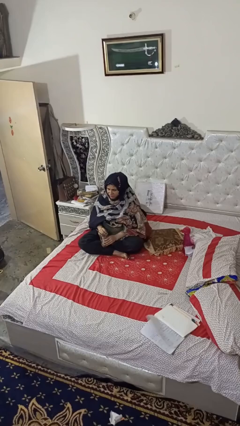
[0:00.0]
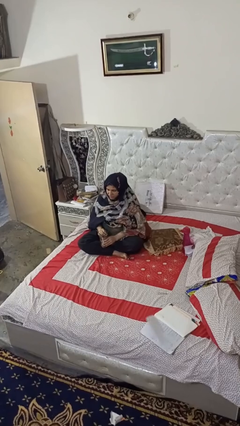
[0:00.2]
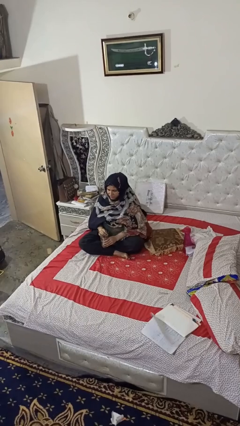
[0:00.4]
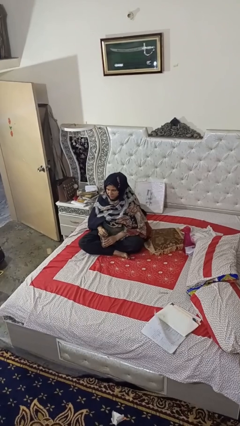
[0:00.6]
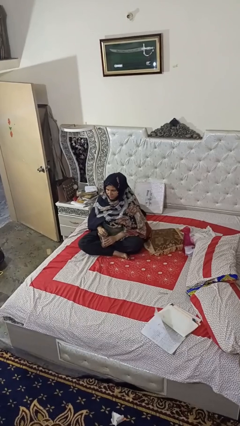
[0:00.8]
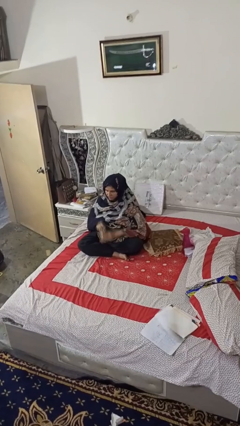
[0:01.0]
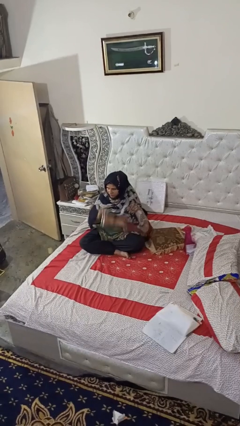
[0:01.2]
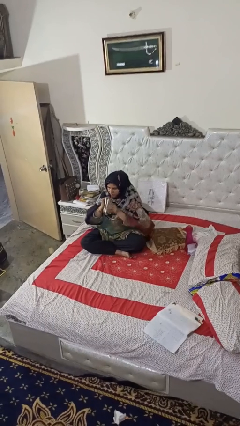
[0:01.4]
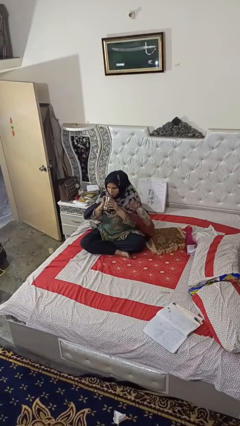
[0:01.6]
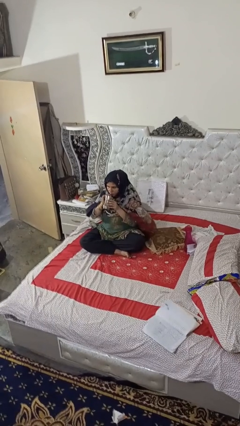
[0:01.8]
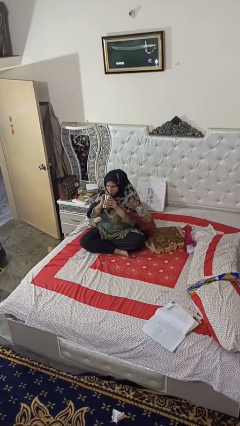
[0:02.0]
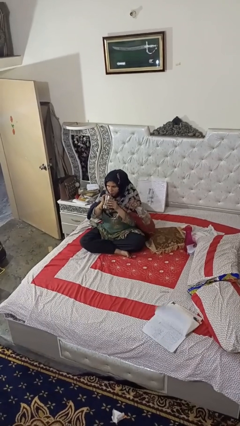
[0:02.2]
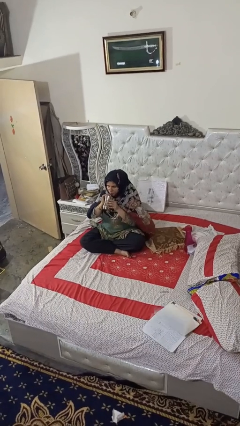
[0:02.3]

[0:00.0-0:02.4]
person drinks from straw

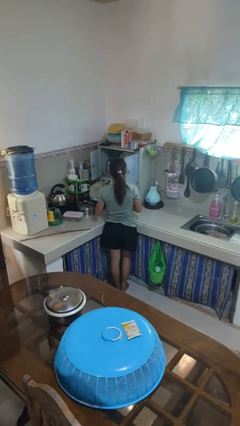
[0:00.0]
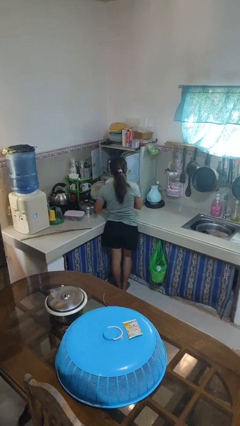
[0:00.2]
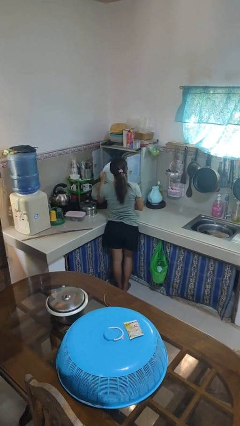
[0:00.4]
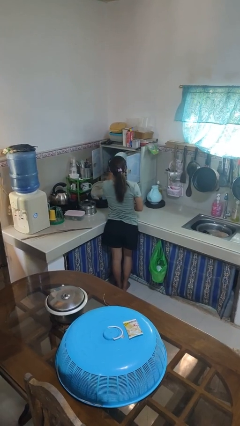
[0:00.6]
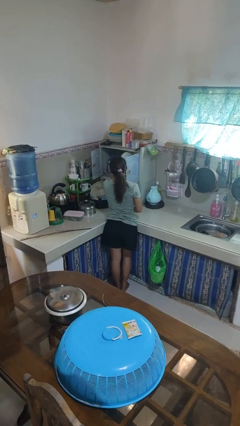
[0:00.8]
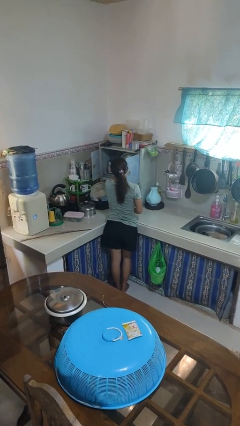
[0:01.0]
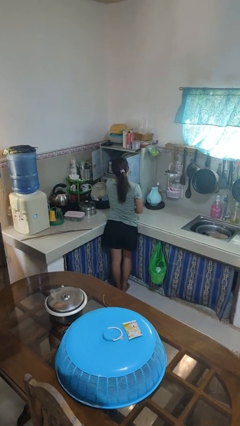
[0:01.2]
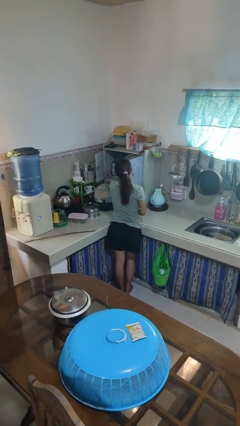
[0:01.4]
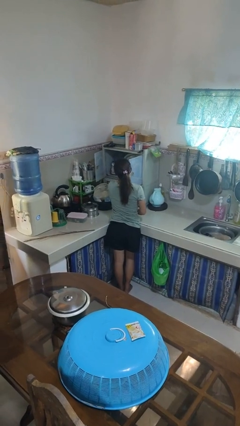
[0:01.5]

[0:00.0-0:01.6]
person puts object into kitchen drawer

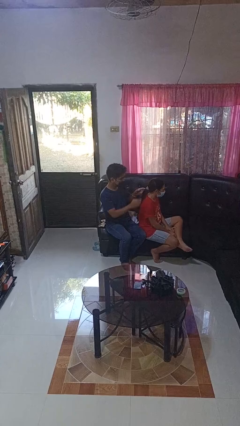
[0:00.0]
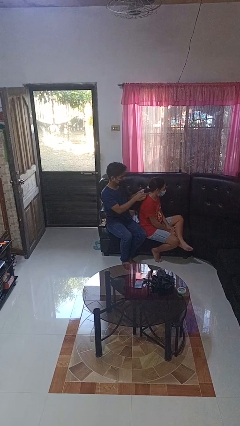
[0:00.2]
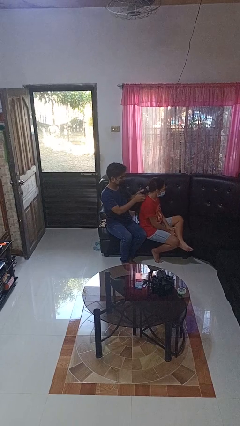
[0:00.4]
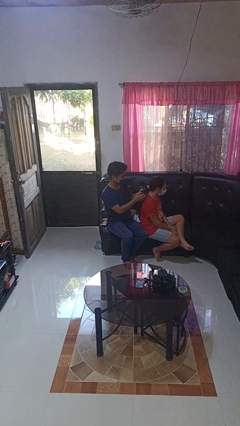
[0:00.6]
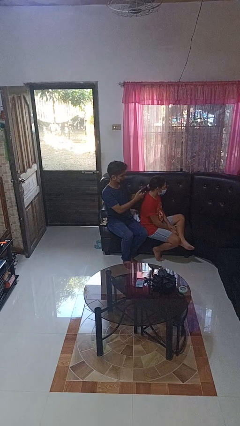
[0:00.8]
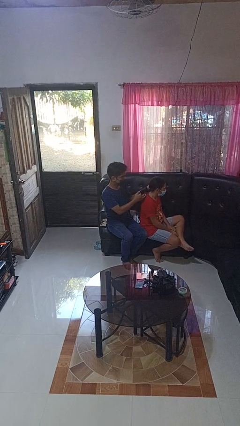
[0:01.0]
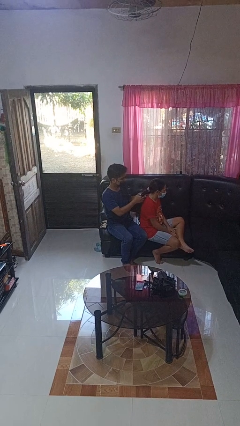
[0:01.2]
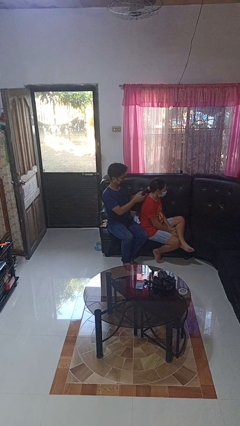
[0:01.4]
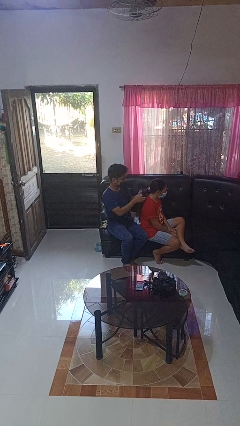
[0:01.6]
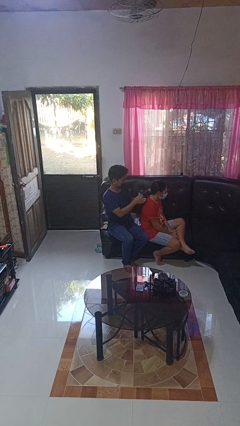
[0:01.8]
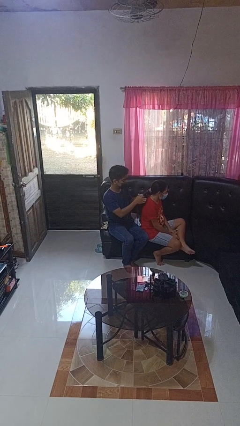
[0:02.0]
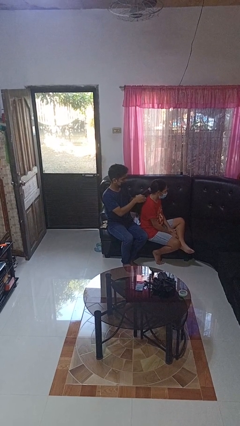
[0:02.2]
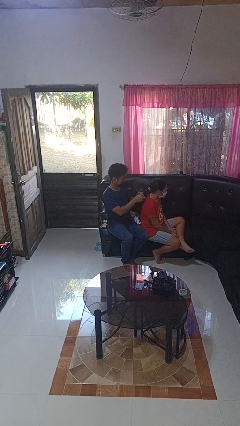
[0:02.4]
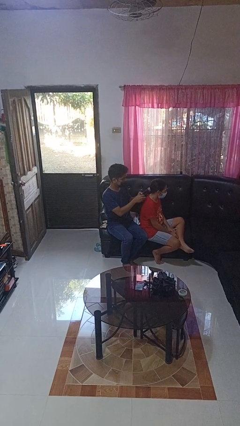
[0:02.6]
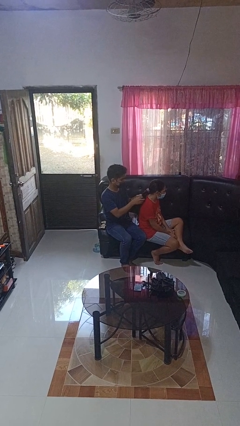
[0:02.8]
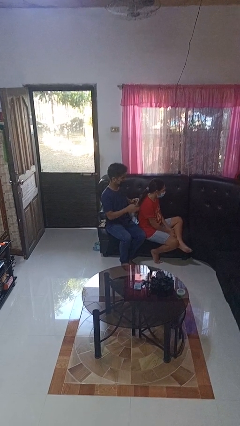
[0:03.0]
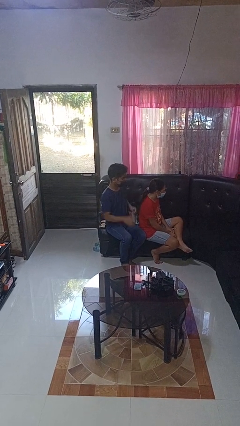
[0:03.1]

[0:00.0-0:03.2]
person braids hair of person

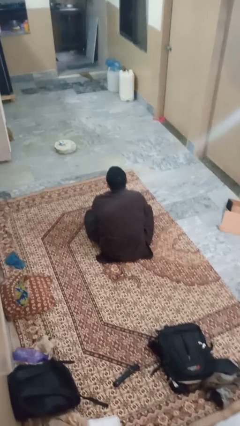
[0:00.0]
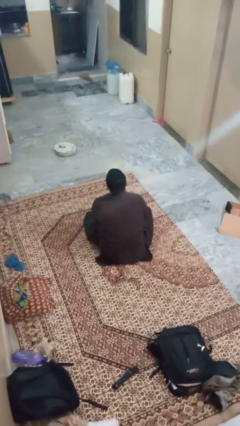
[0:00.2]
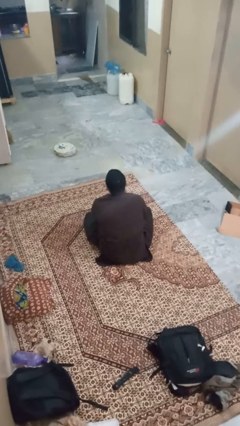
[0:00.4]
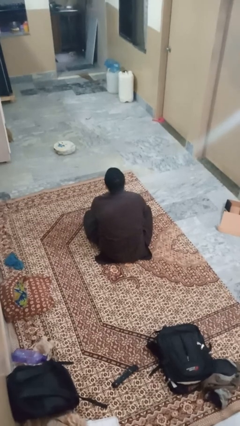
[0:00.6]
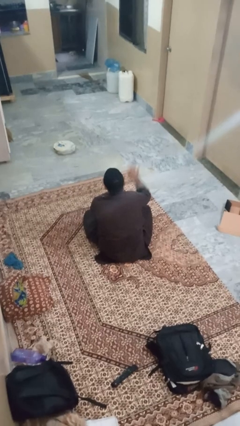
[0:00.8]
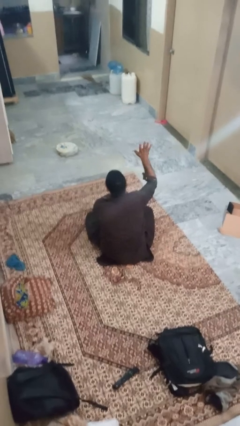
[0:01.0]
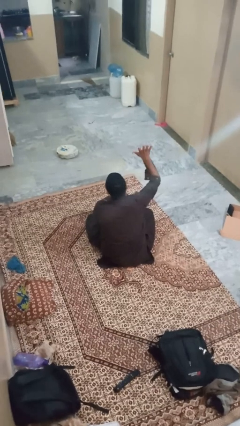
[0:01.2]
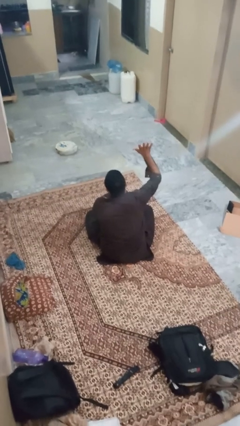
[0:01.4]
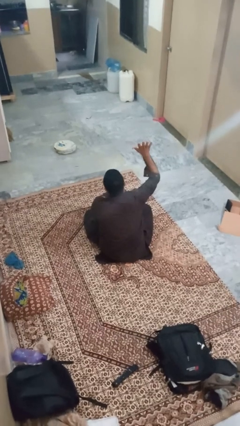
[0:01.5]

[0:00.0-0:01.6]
person gestures number five

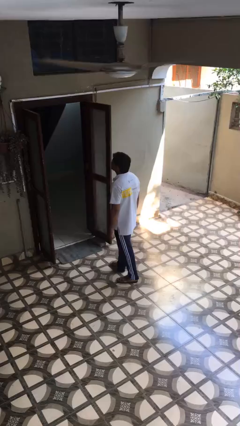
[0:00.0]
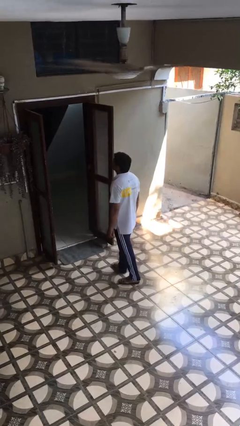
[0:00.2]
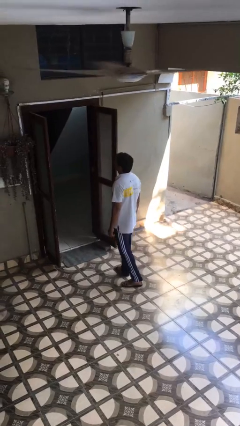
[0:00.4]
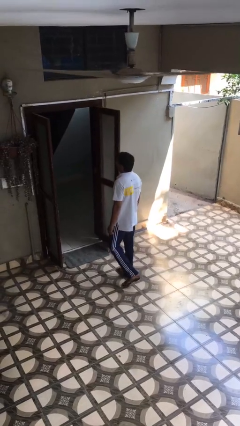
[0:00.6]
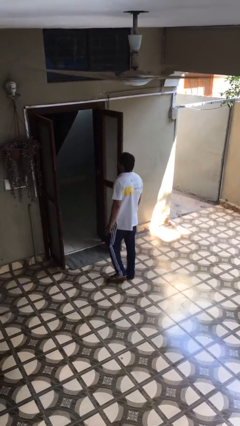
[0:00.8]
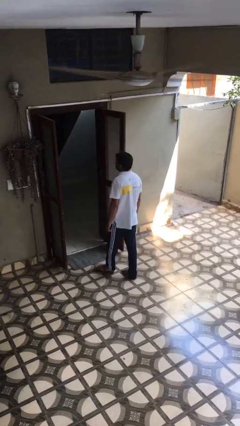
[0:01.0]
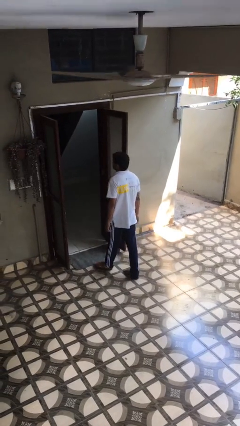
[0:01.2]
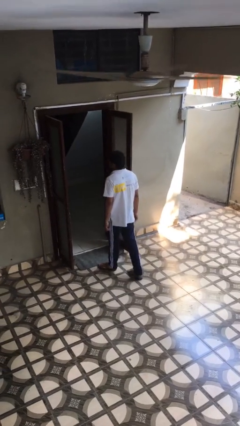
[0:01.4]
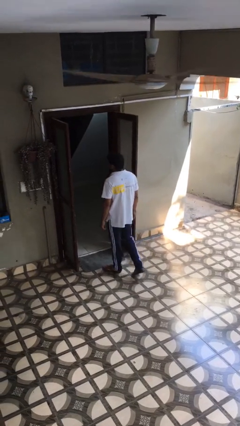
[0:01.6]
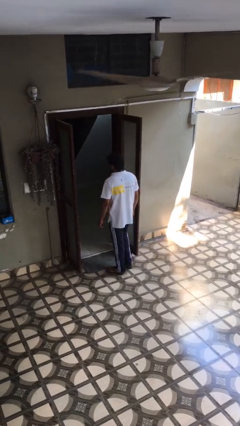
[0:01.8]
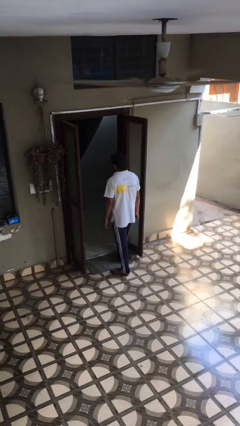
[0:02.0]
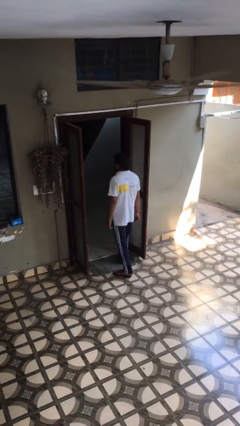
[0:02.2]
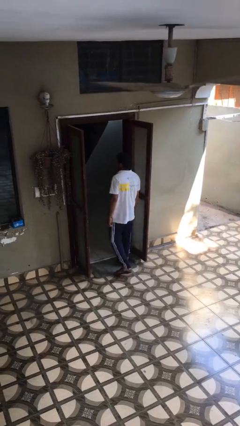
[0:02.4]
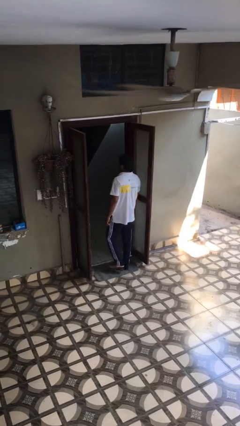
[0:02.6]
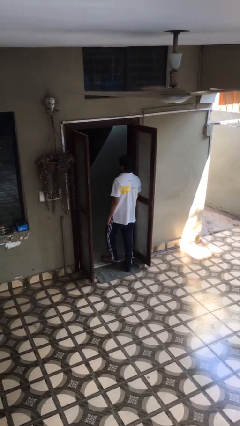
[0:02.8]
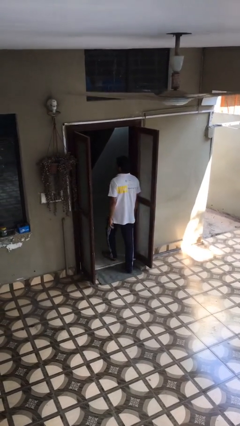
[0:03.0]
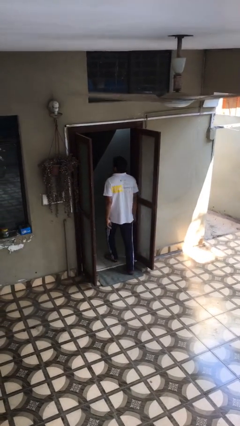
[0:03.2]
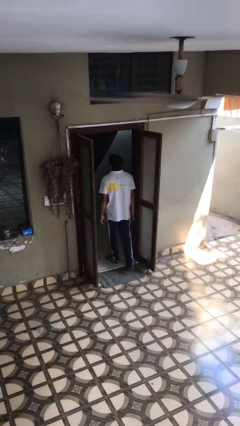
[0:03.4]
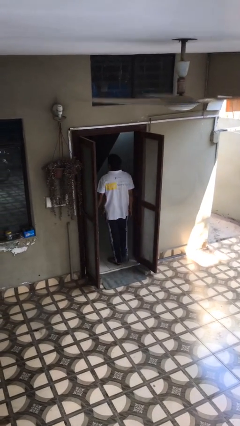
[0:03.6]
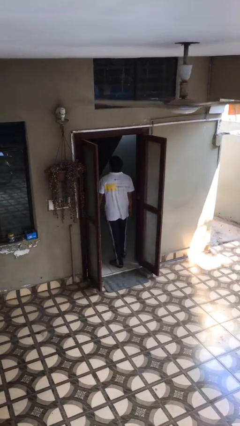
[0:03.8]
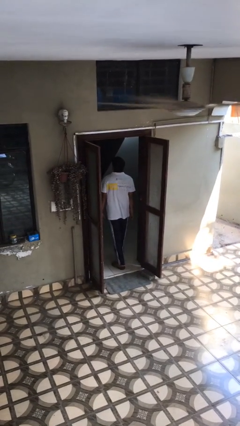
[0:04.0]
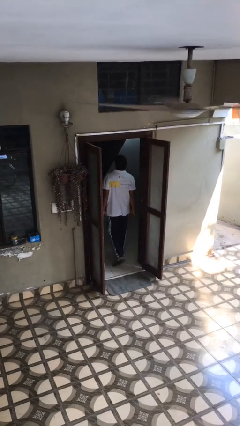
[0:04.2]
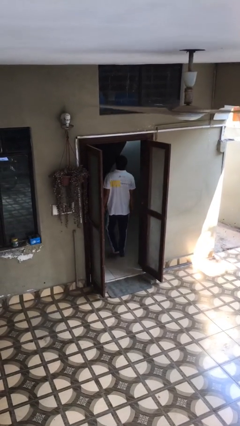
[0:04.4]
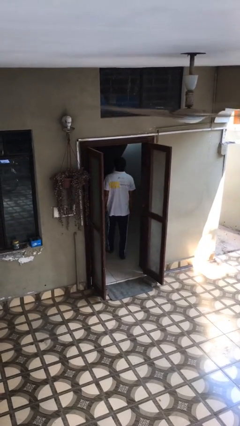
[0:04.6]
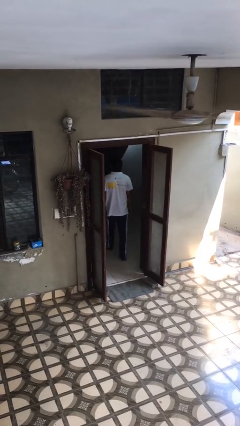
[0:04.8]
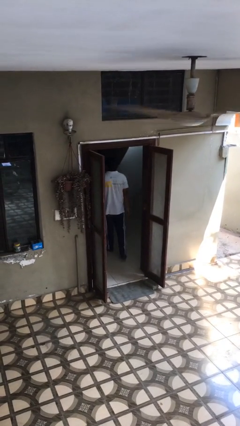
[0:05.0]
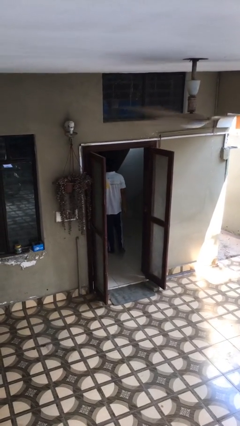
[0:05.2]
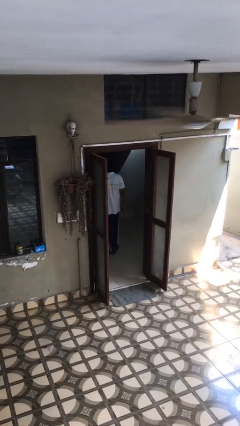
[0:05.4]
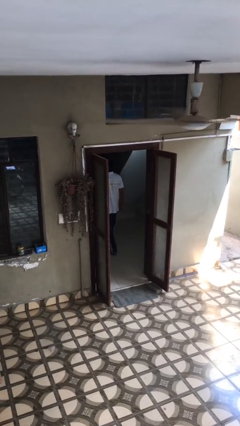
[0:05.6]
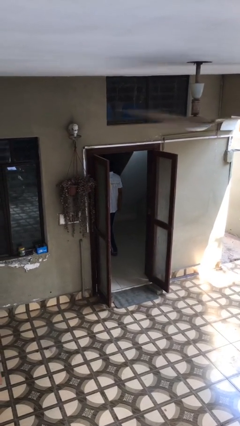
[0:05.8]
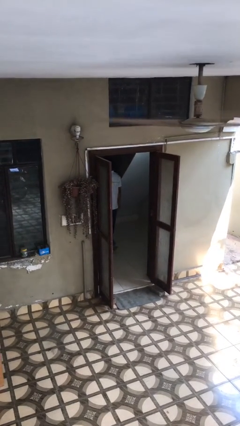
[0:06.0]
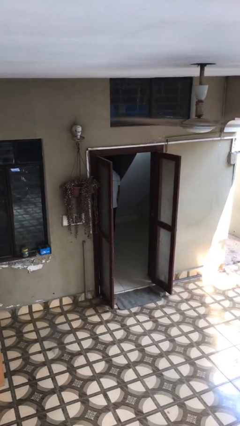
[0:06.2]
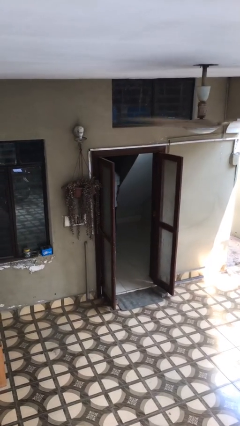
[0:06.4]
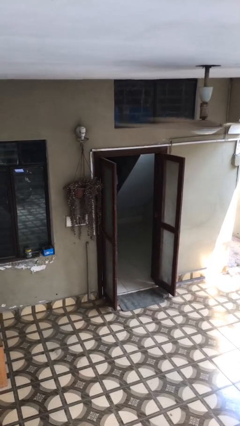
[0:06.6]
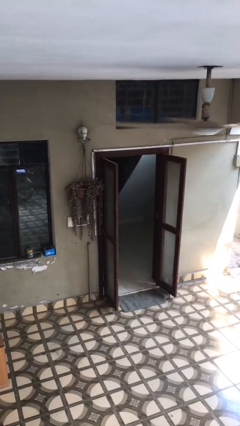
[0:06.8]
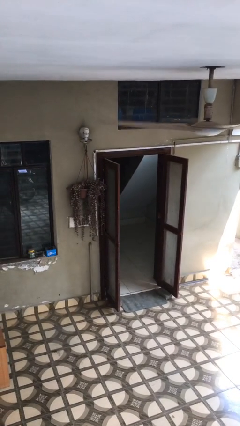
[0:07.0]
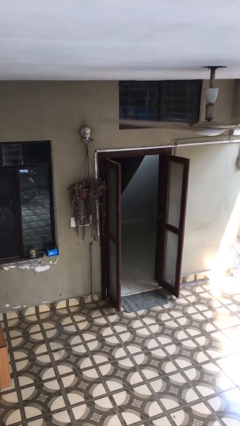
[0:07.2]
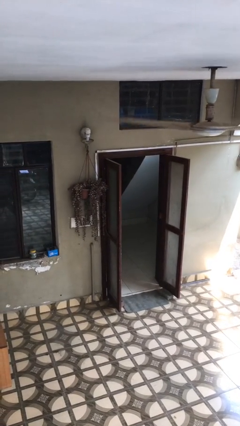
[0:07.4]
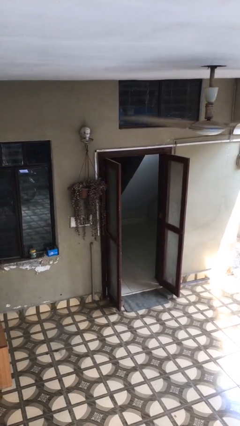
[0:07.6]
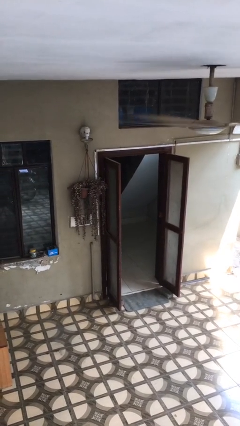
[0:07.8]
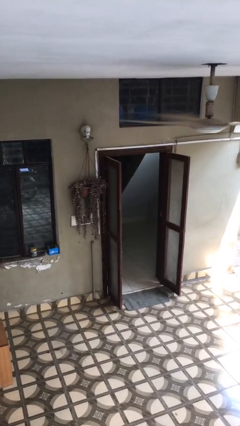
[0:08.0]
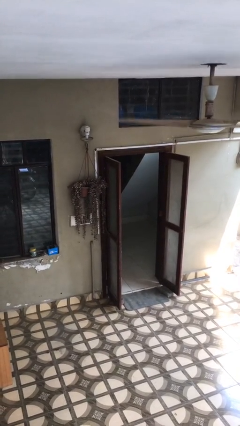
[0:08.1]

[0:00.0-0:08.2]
person exits scene through structure

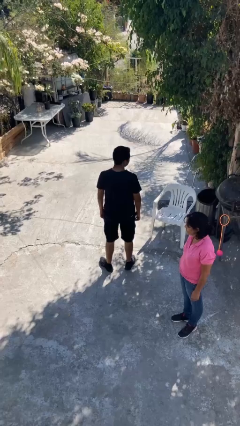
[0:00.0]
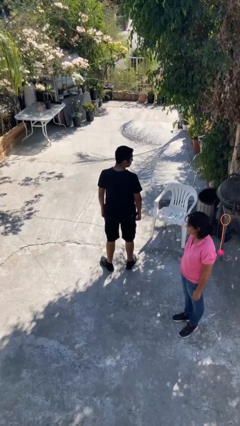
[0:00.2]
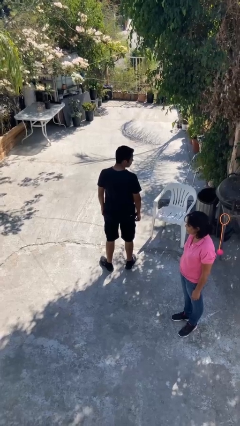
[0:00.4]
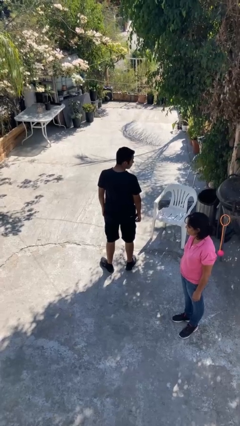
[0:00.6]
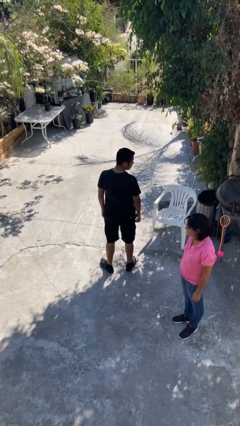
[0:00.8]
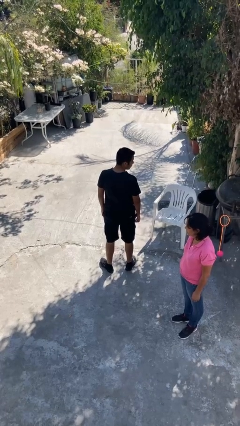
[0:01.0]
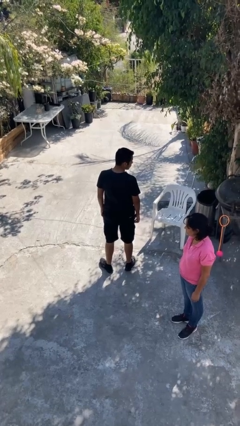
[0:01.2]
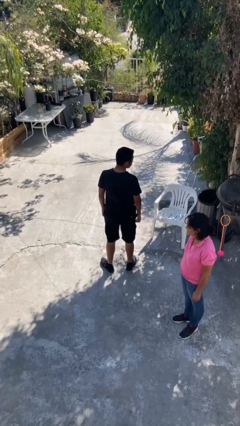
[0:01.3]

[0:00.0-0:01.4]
person looks over shoulder
